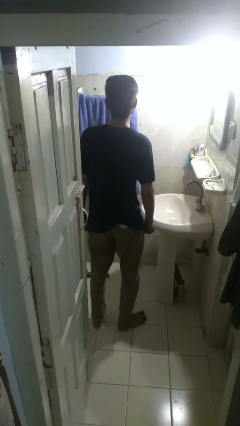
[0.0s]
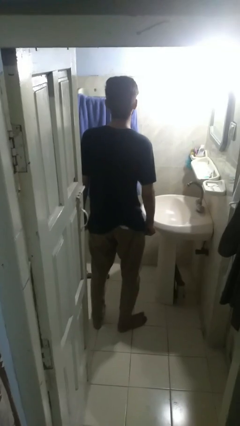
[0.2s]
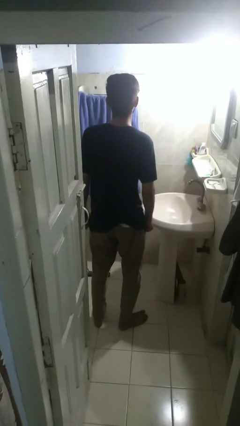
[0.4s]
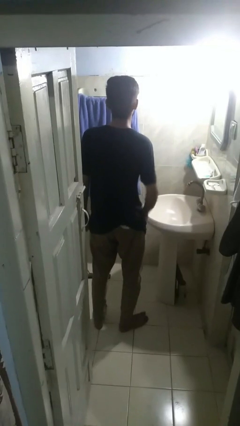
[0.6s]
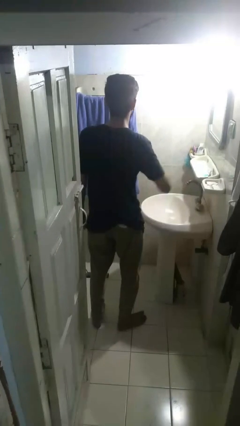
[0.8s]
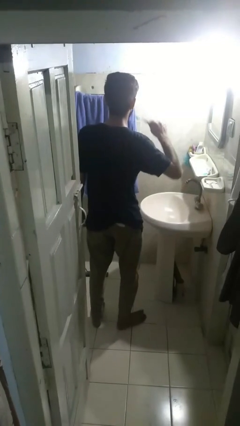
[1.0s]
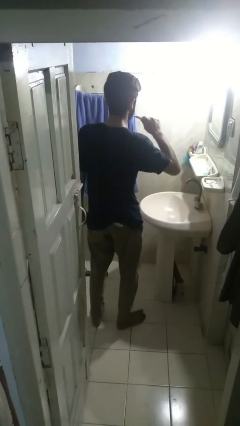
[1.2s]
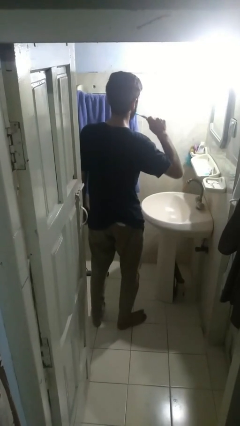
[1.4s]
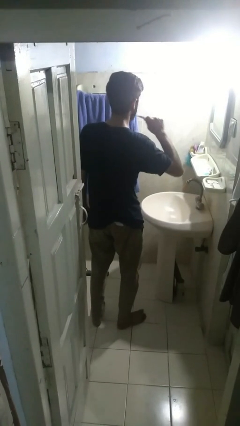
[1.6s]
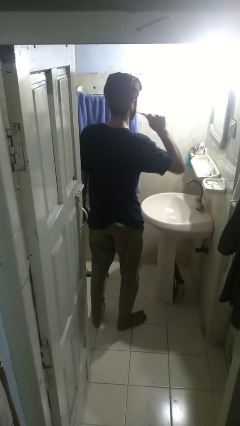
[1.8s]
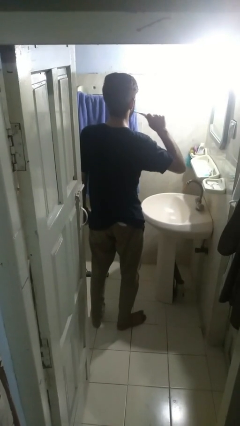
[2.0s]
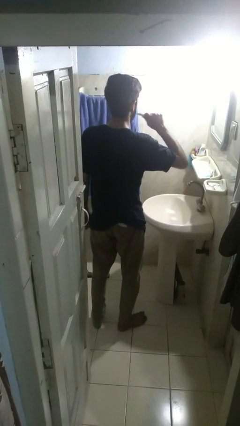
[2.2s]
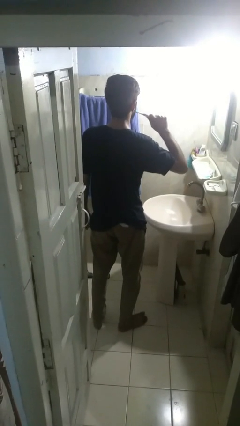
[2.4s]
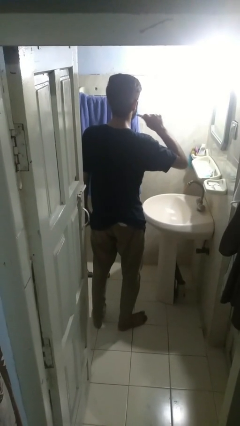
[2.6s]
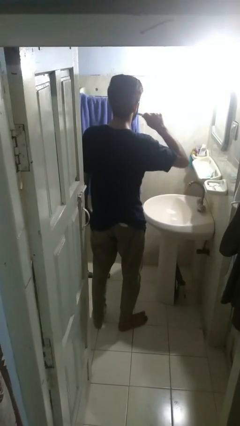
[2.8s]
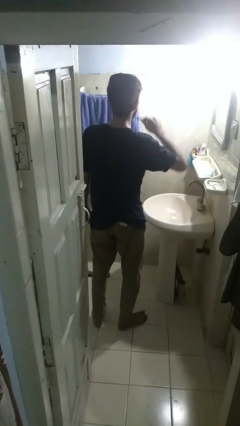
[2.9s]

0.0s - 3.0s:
person brushes teeth

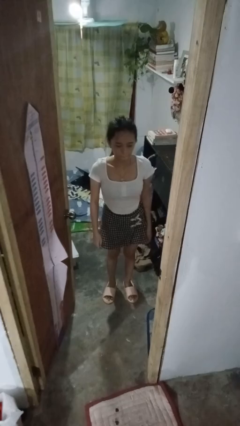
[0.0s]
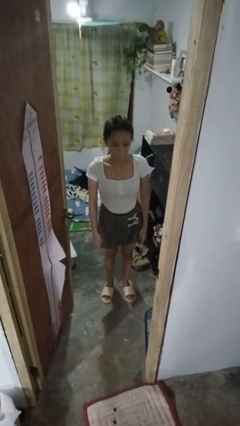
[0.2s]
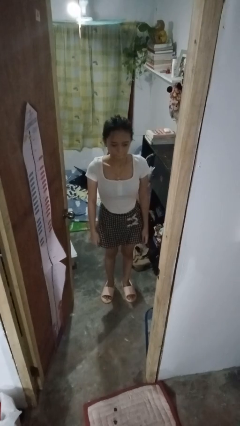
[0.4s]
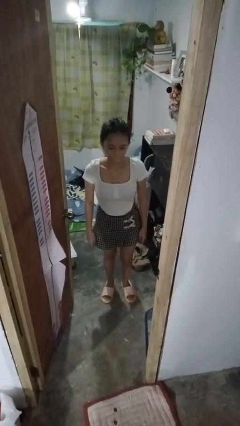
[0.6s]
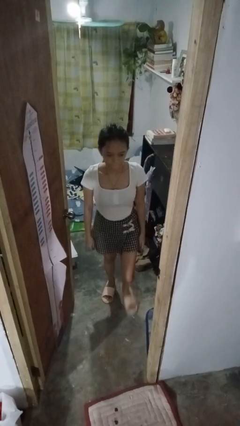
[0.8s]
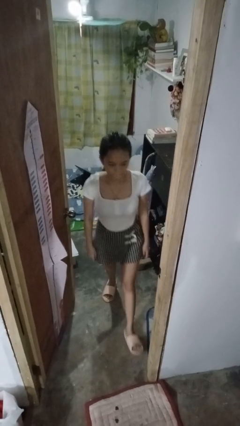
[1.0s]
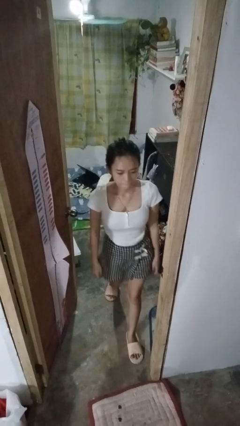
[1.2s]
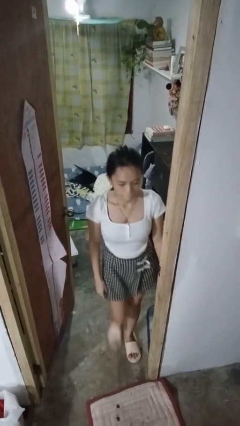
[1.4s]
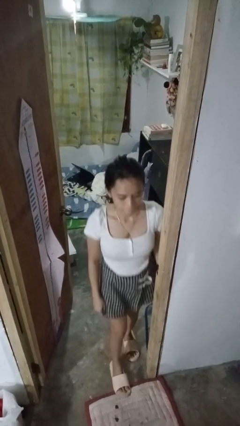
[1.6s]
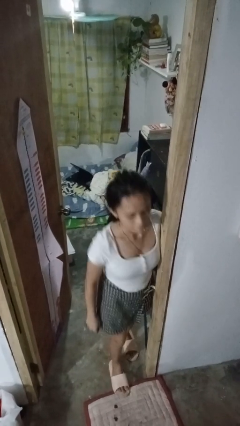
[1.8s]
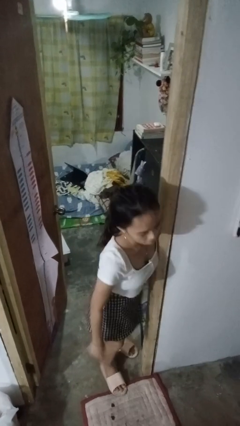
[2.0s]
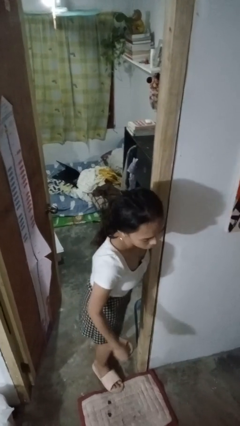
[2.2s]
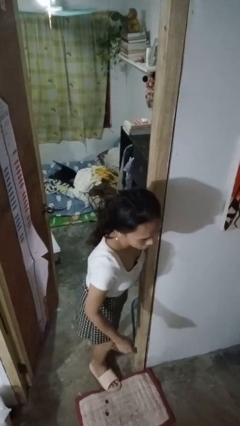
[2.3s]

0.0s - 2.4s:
person bumps into wall

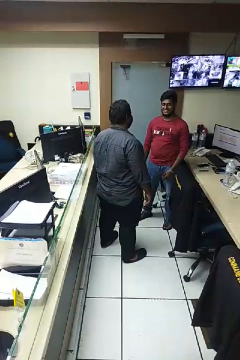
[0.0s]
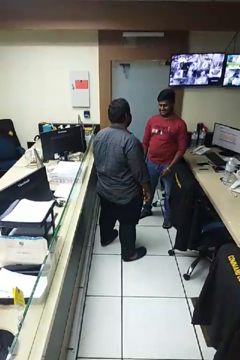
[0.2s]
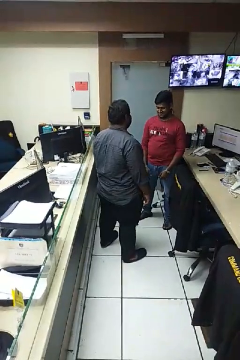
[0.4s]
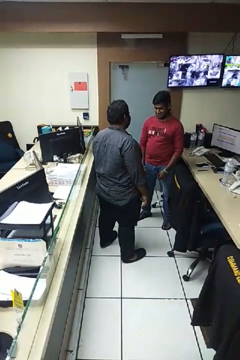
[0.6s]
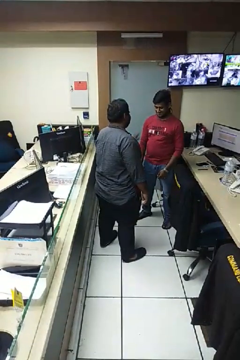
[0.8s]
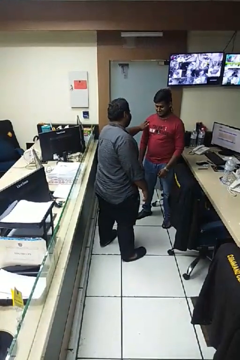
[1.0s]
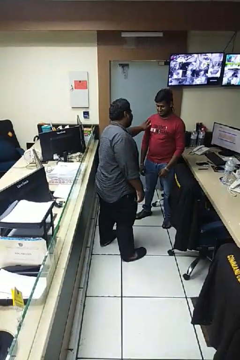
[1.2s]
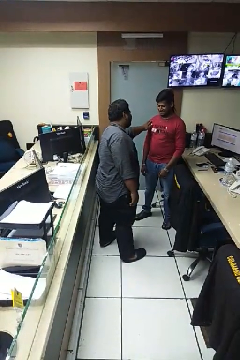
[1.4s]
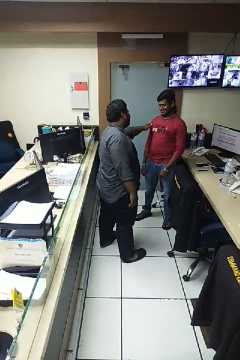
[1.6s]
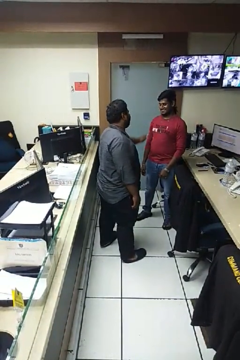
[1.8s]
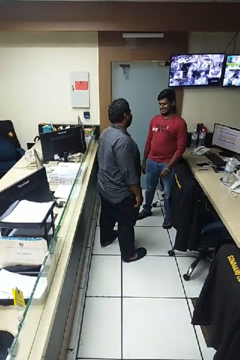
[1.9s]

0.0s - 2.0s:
person shoves person

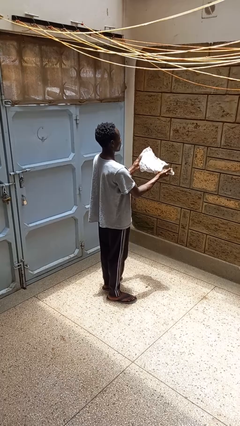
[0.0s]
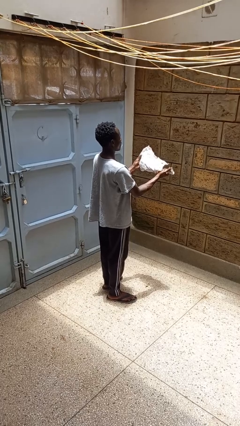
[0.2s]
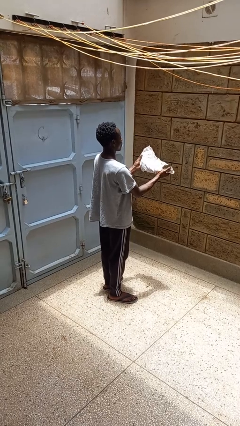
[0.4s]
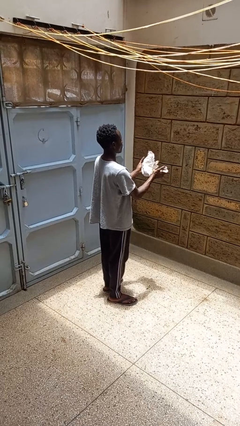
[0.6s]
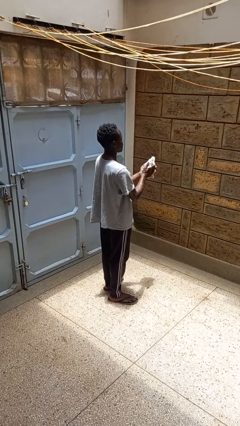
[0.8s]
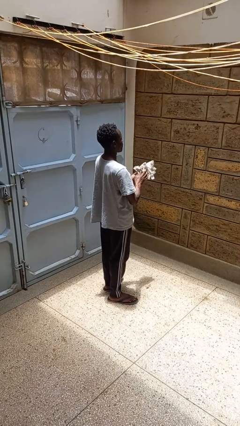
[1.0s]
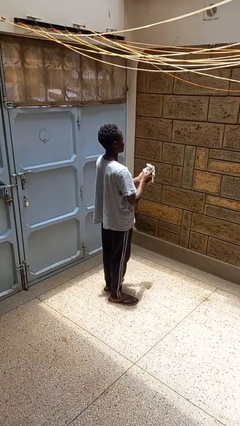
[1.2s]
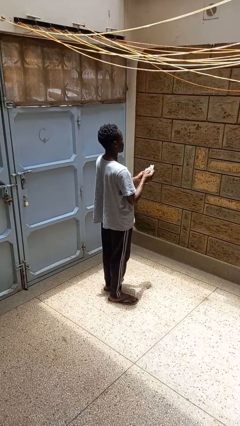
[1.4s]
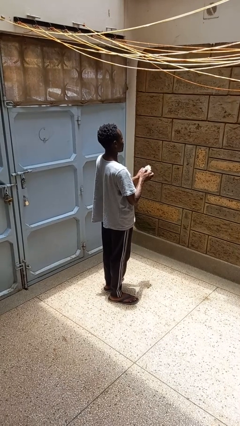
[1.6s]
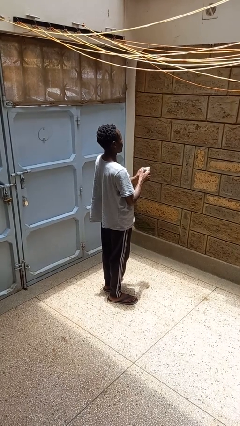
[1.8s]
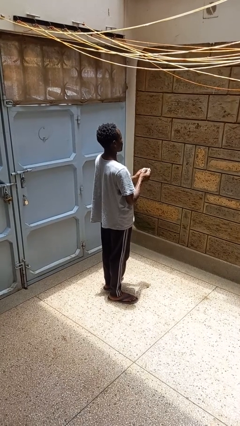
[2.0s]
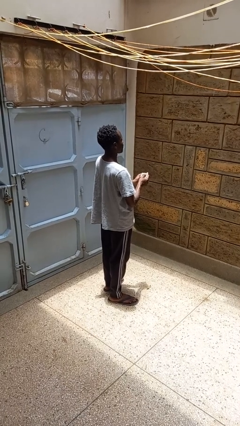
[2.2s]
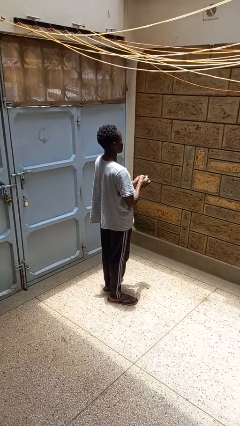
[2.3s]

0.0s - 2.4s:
person crumples paper

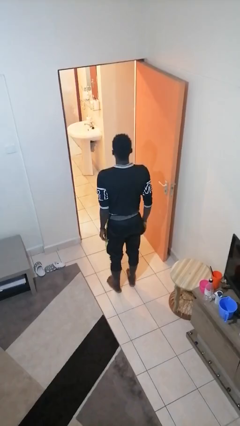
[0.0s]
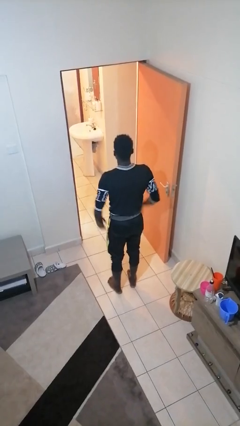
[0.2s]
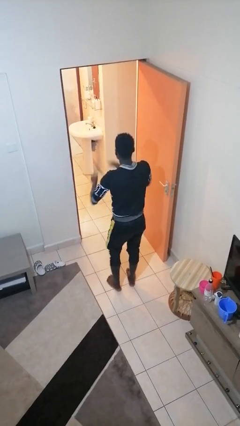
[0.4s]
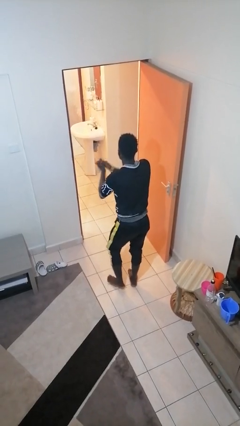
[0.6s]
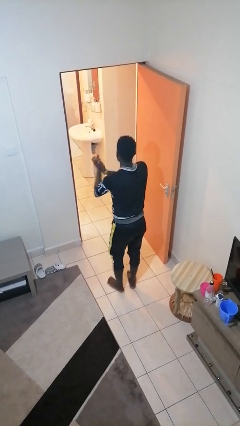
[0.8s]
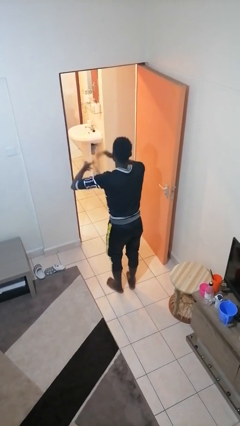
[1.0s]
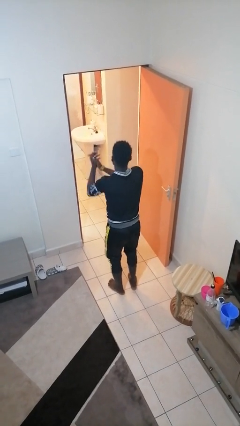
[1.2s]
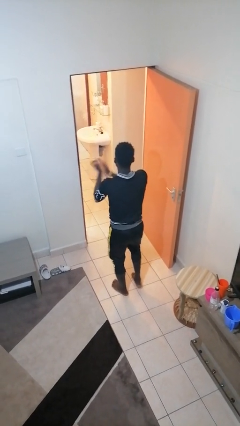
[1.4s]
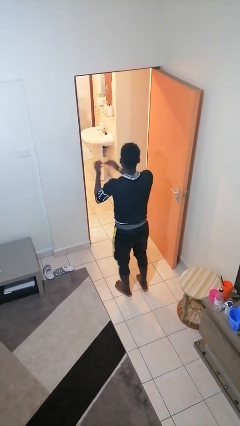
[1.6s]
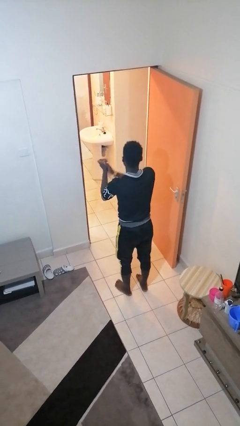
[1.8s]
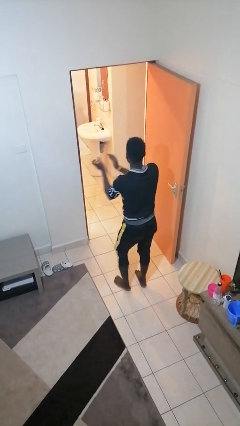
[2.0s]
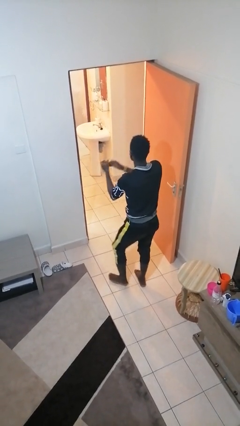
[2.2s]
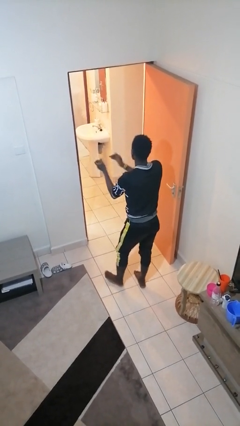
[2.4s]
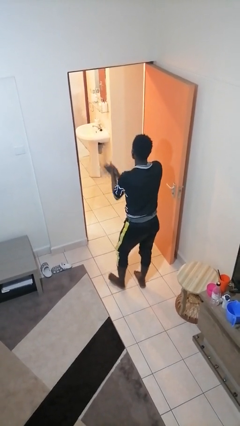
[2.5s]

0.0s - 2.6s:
person claps hands

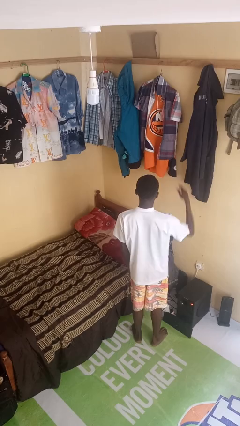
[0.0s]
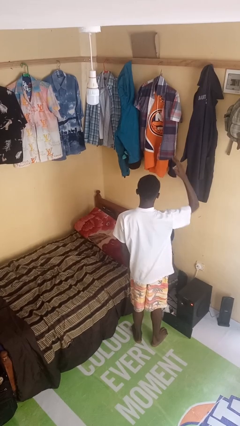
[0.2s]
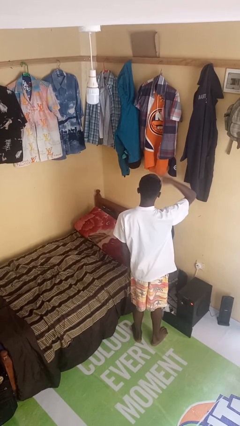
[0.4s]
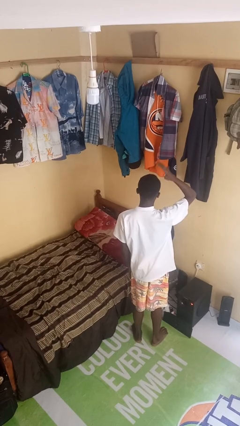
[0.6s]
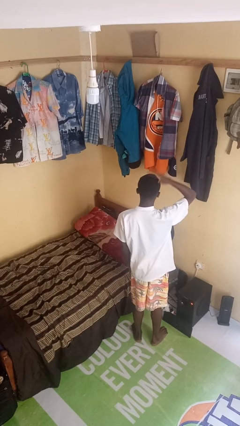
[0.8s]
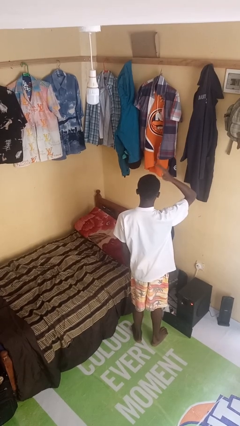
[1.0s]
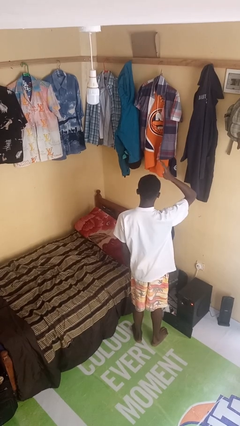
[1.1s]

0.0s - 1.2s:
person pats head

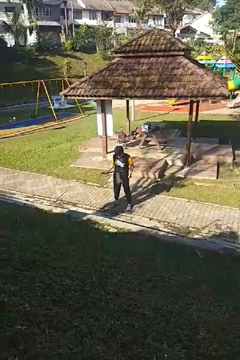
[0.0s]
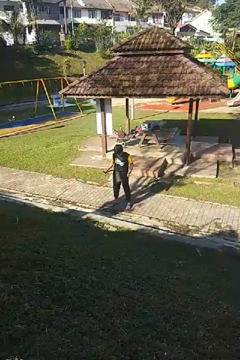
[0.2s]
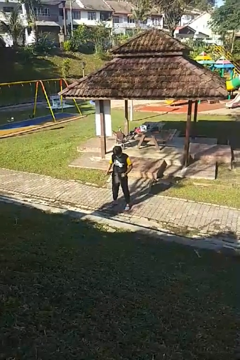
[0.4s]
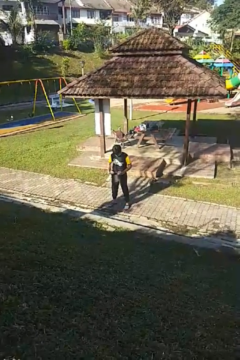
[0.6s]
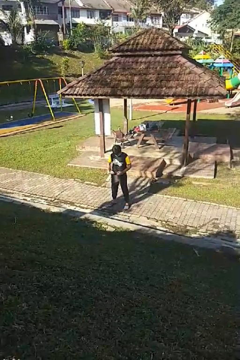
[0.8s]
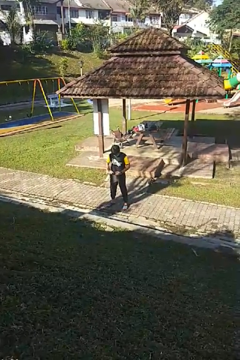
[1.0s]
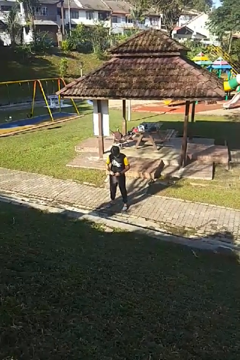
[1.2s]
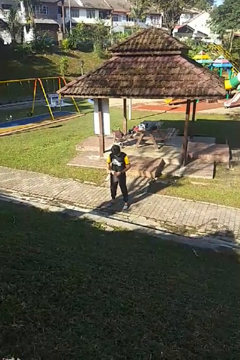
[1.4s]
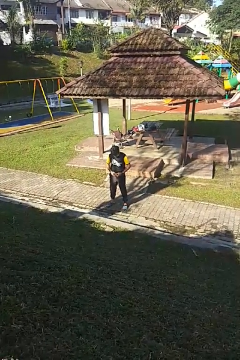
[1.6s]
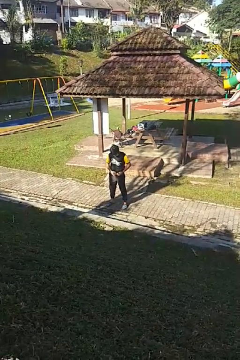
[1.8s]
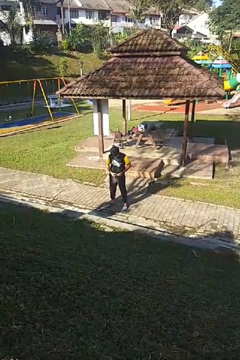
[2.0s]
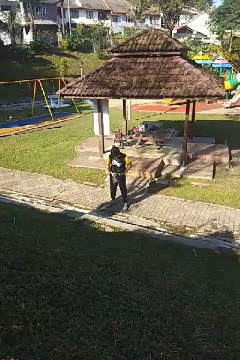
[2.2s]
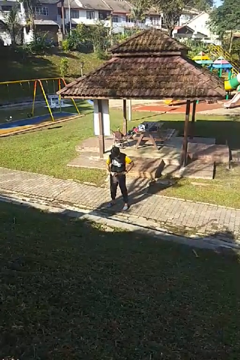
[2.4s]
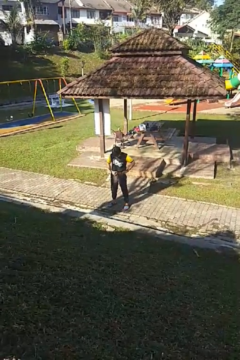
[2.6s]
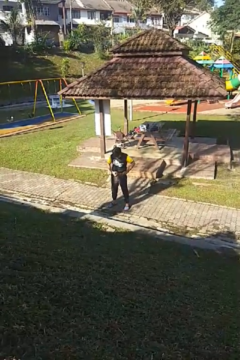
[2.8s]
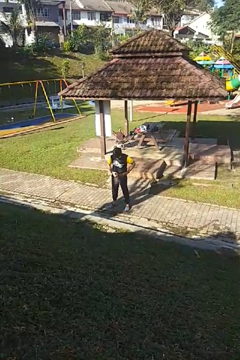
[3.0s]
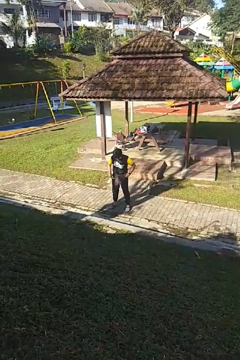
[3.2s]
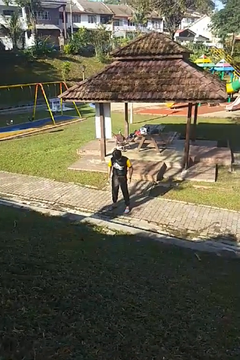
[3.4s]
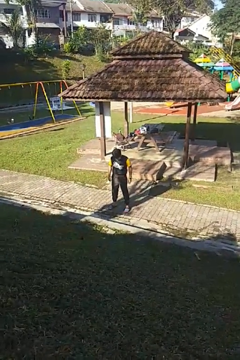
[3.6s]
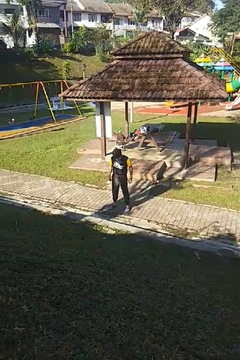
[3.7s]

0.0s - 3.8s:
person puts on belt

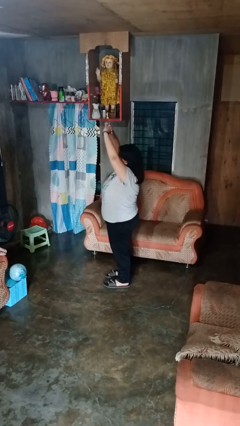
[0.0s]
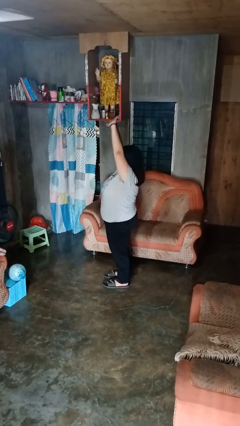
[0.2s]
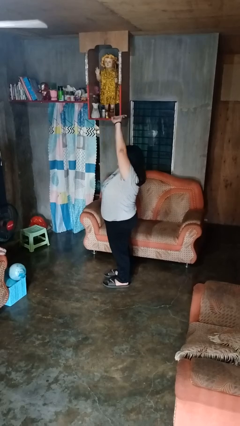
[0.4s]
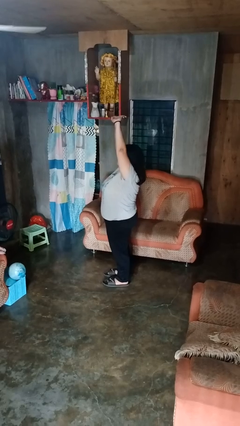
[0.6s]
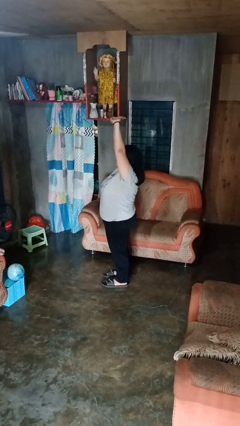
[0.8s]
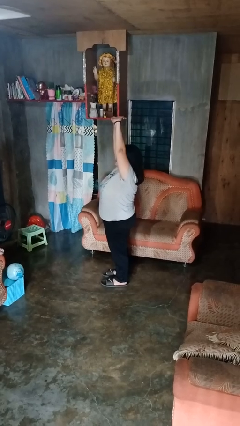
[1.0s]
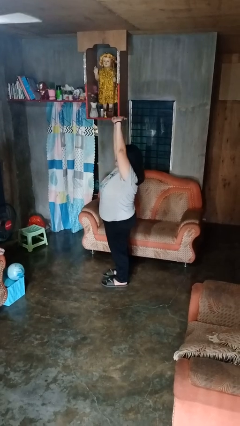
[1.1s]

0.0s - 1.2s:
person stretches arms over head
